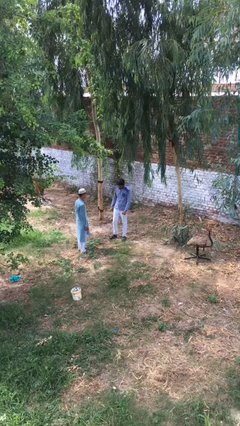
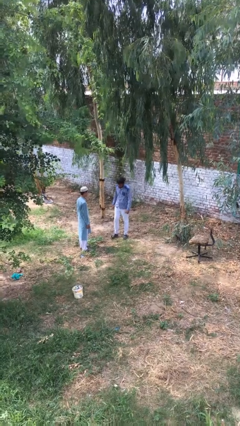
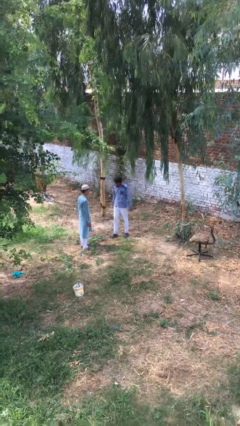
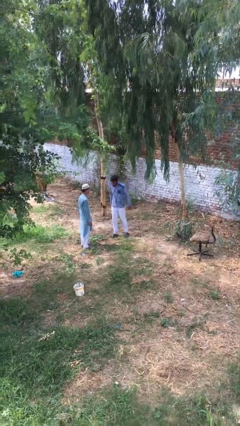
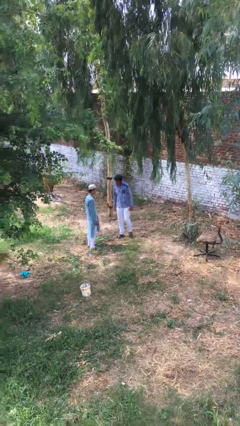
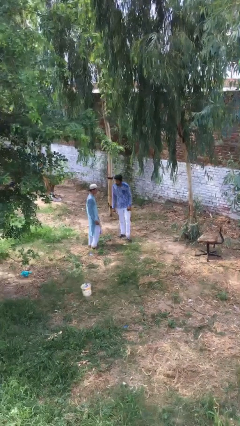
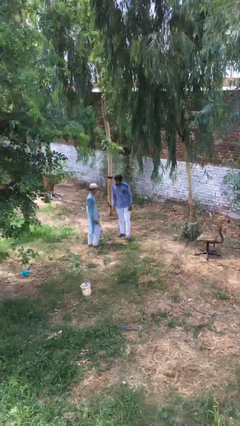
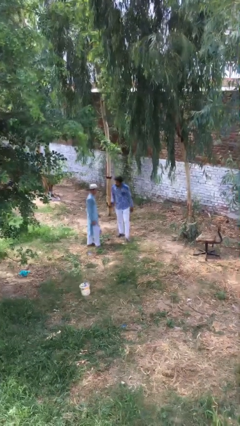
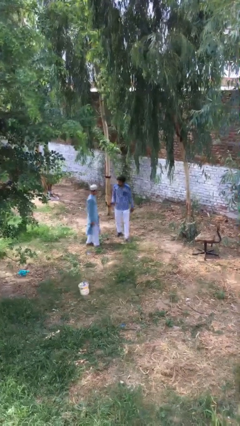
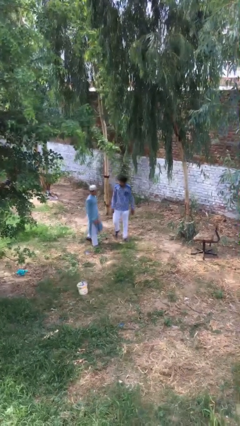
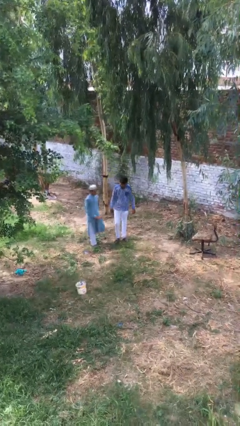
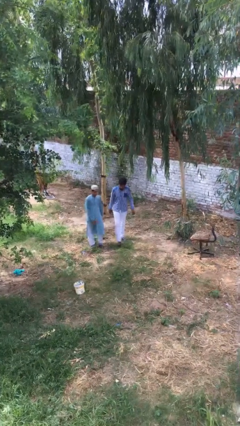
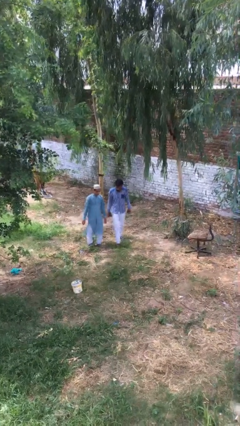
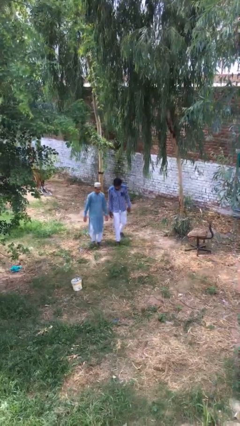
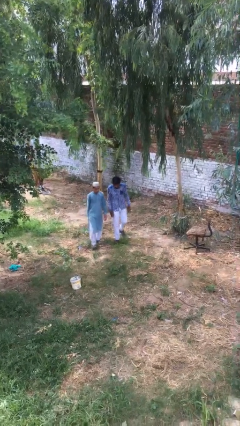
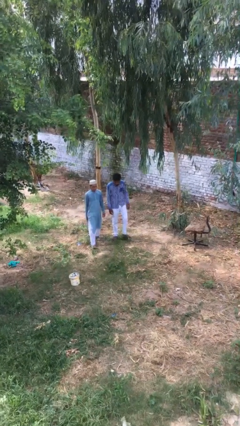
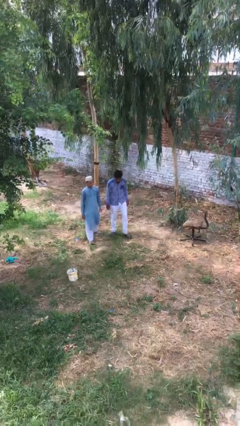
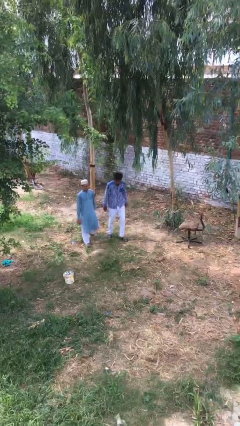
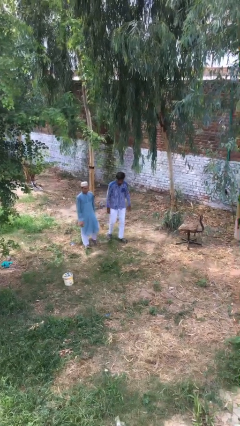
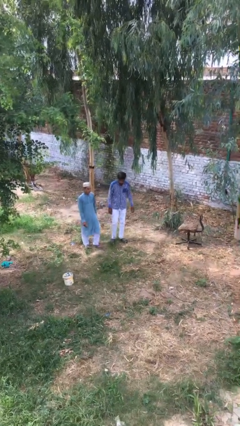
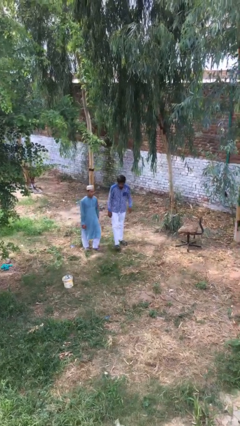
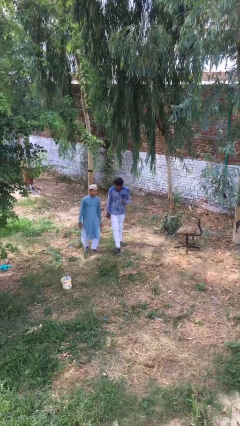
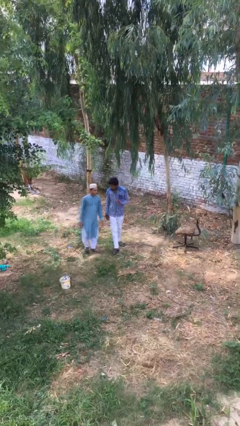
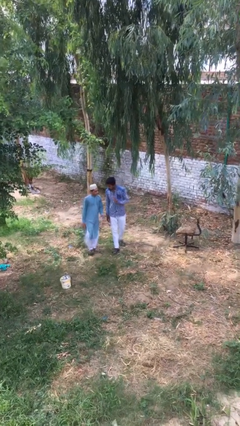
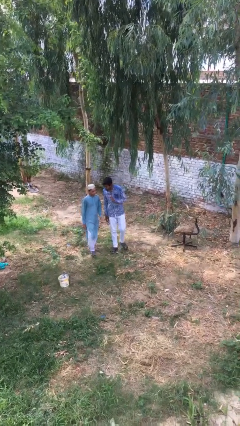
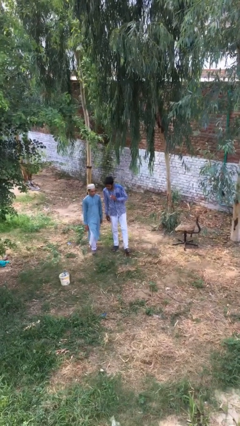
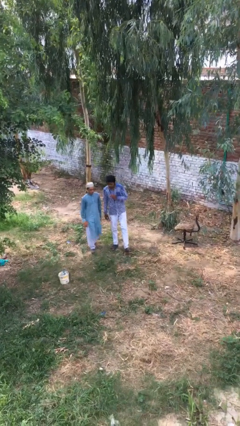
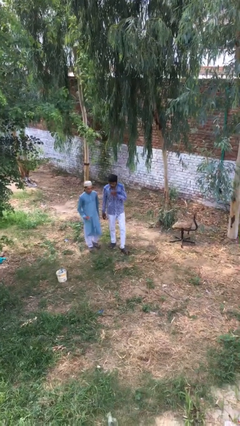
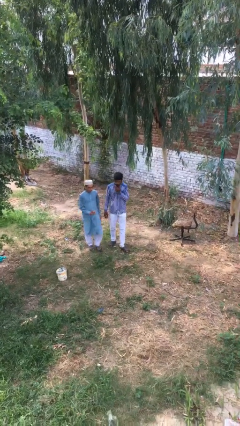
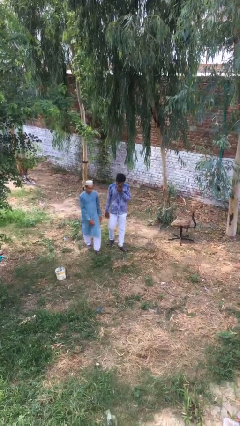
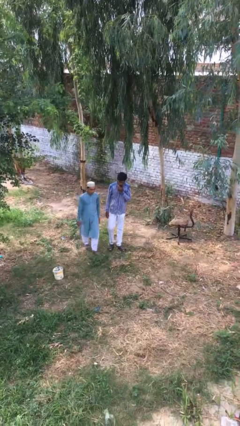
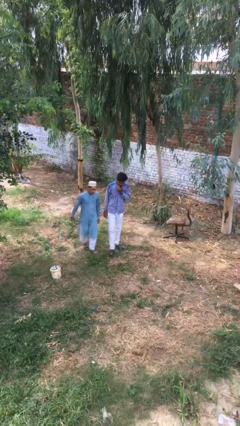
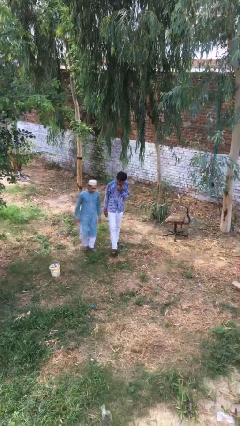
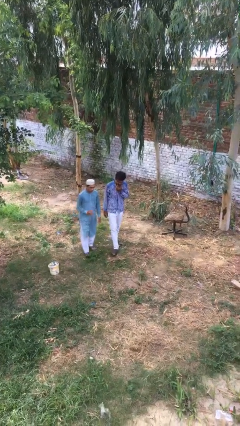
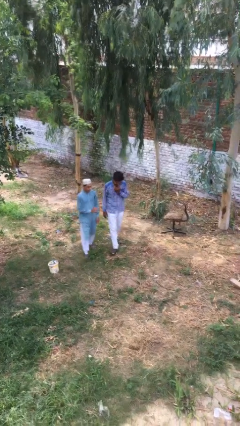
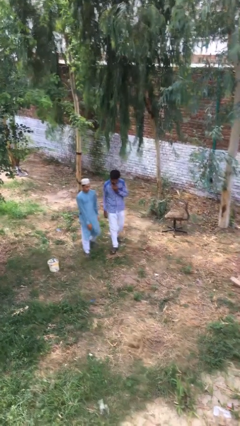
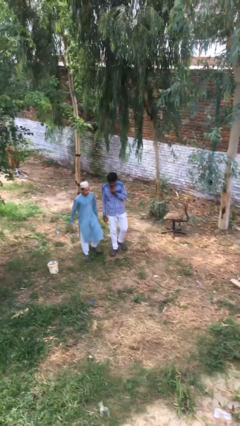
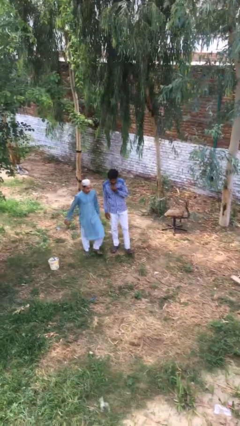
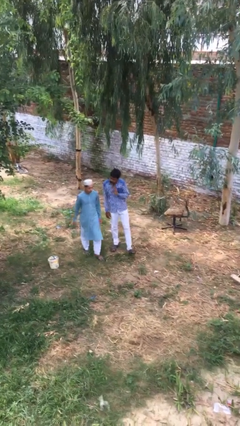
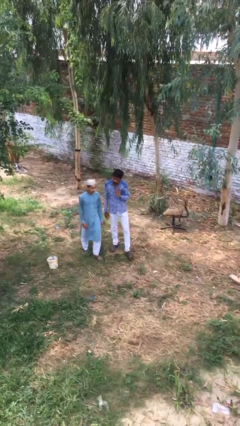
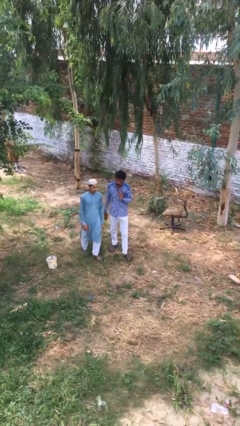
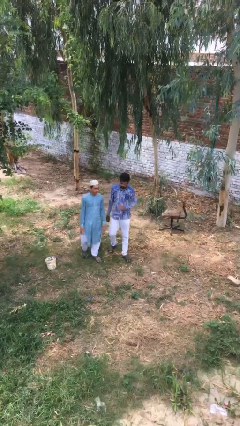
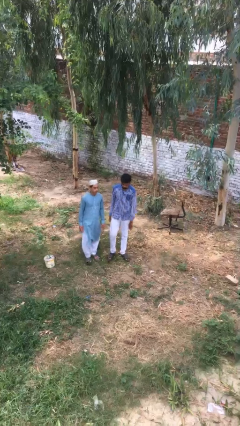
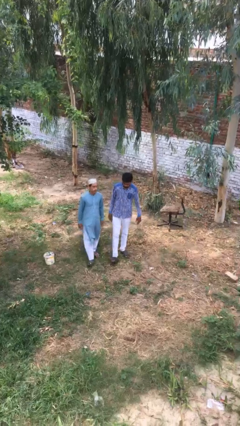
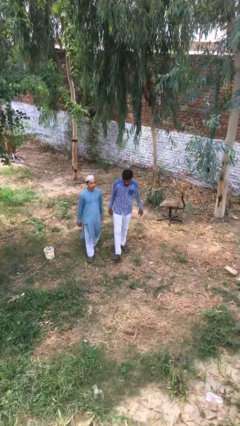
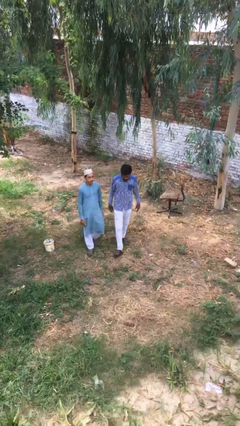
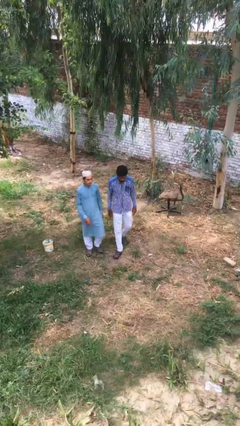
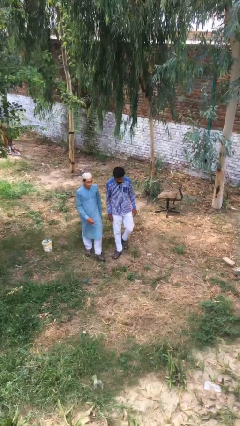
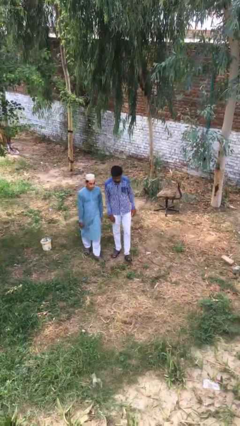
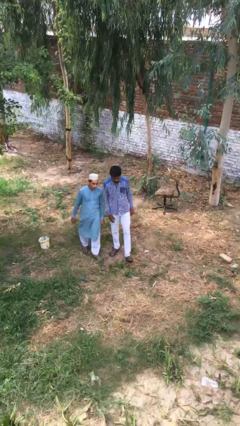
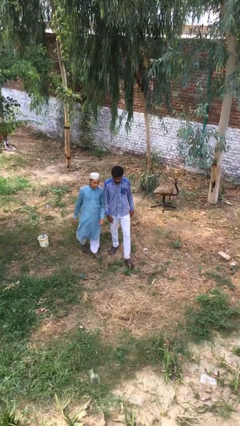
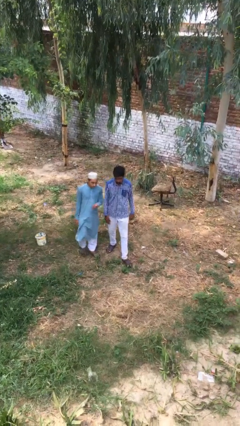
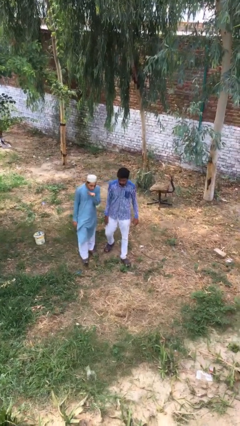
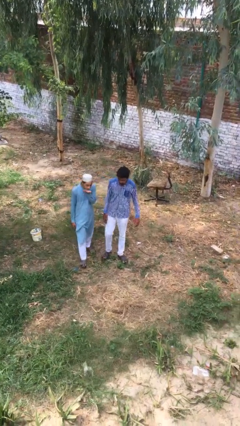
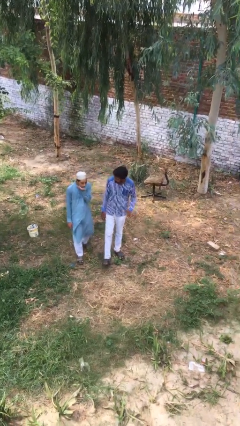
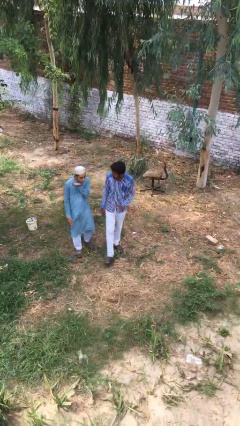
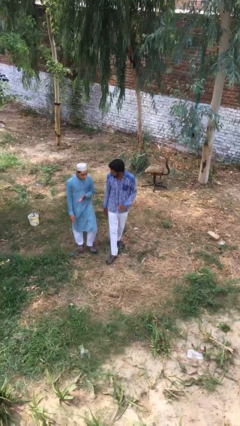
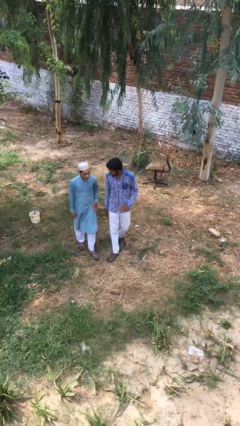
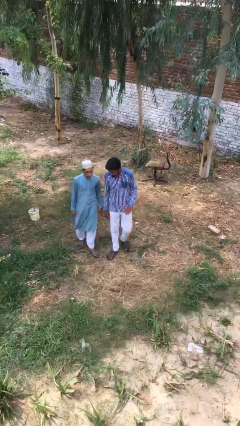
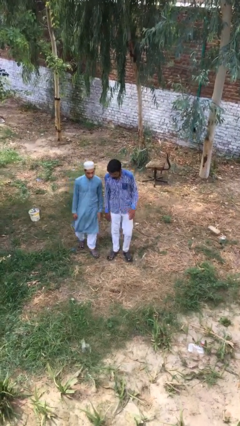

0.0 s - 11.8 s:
person talks to person

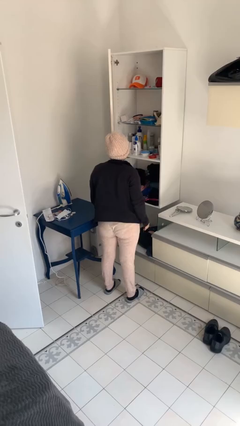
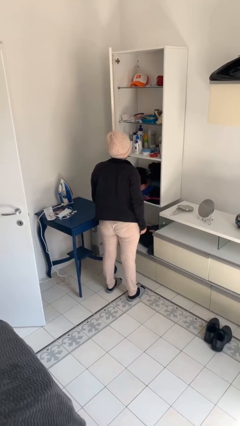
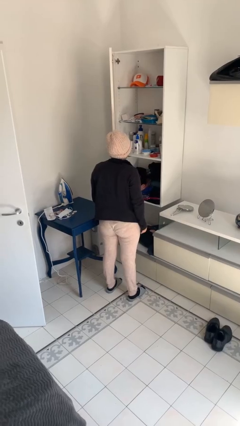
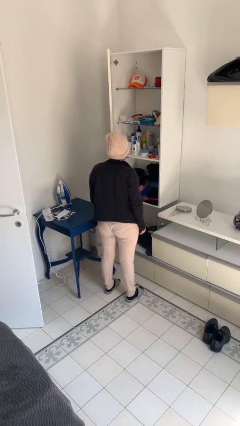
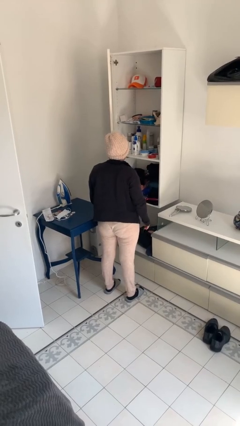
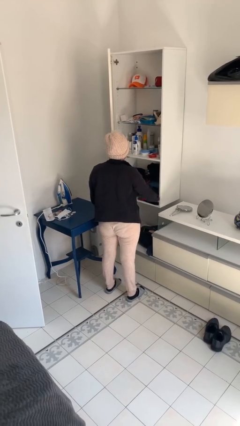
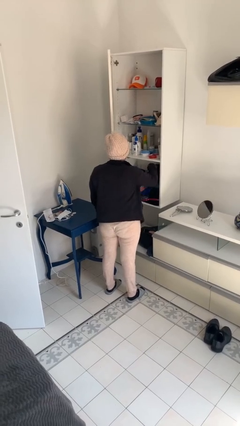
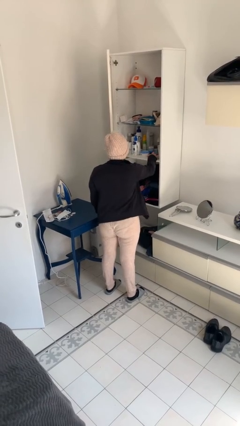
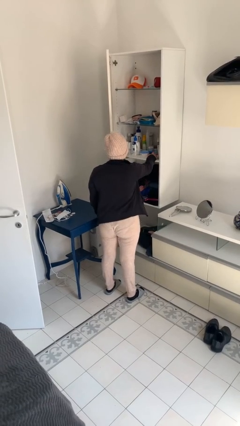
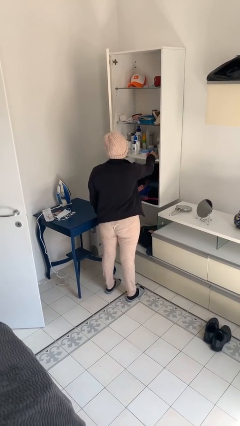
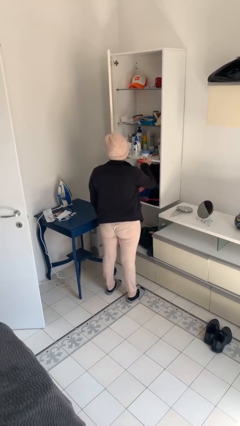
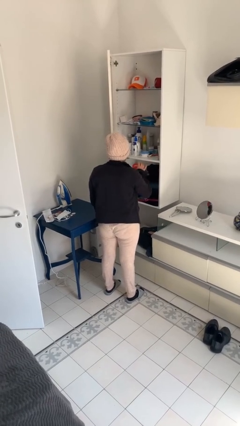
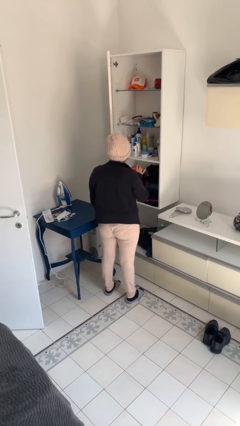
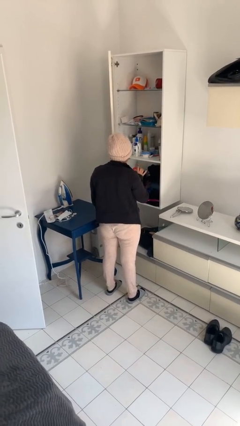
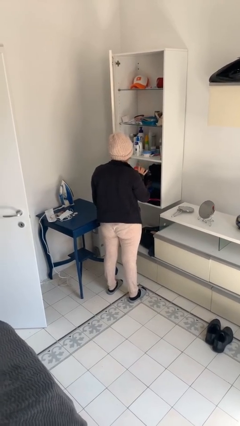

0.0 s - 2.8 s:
person picks up object from shelf

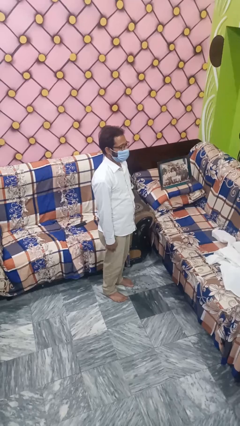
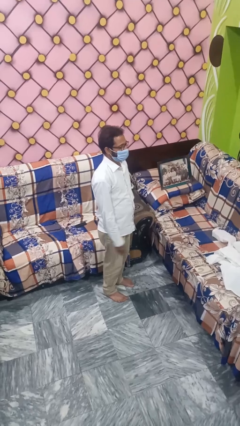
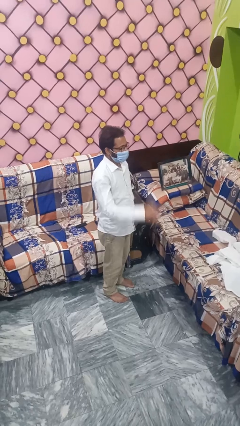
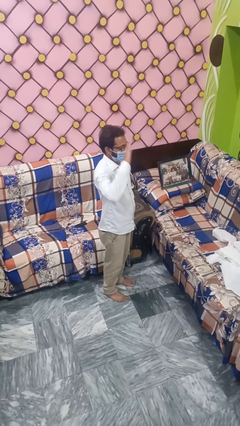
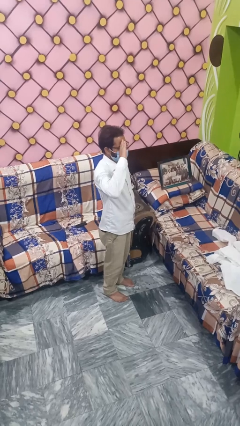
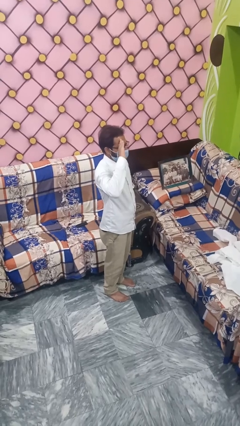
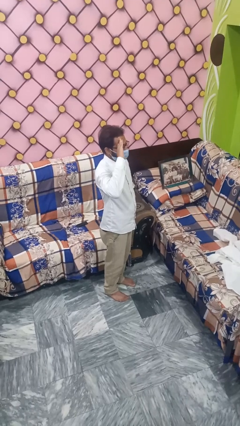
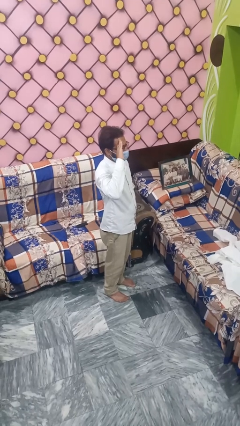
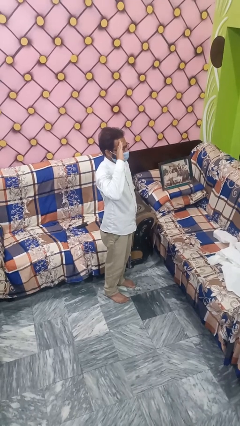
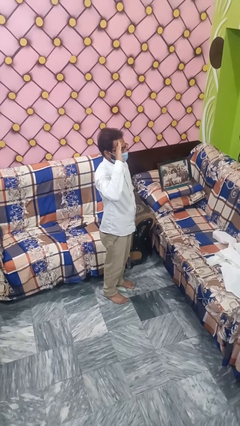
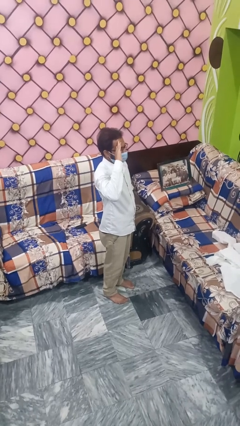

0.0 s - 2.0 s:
person salutes

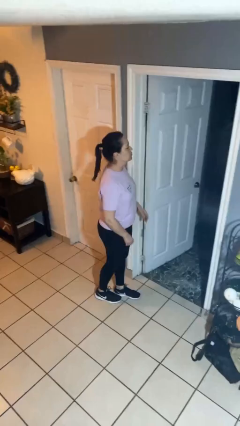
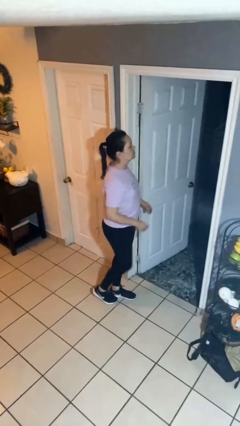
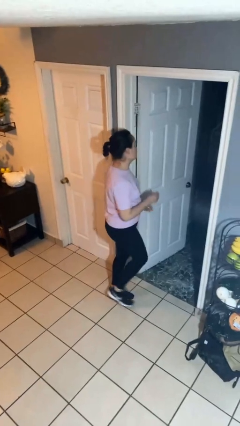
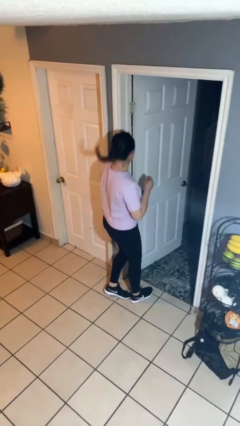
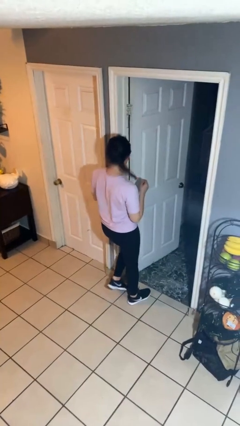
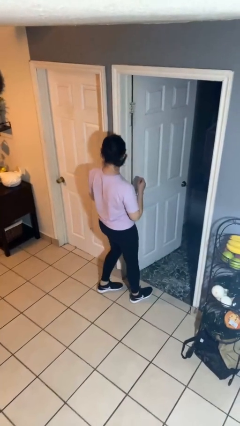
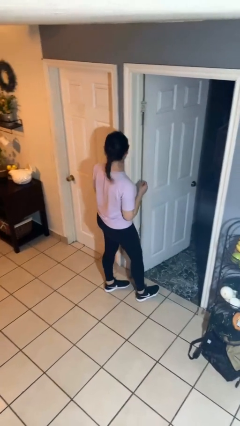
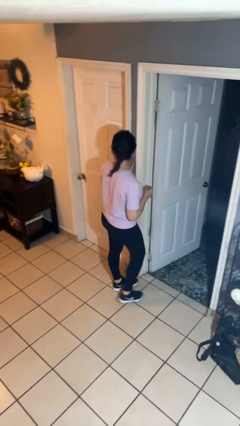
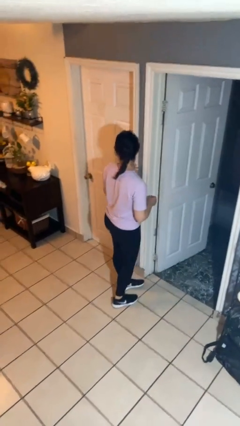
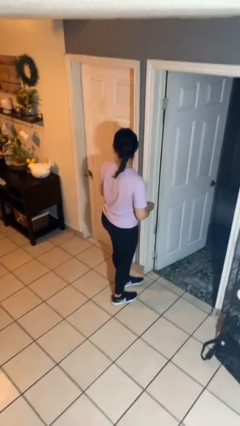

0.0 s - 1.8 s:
person bumps into wall
